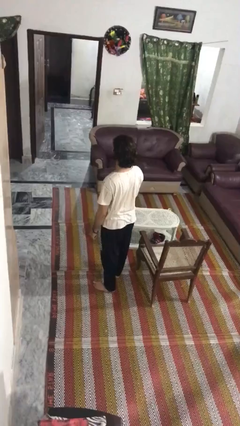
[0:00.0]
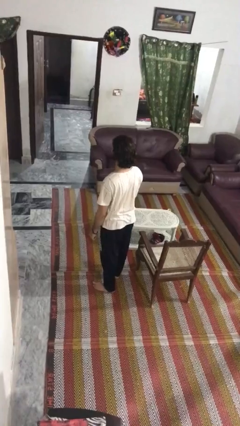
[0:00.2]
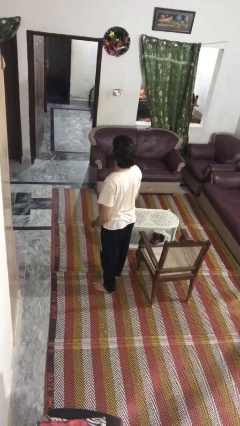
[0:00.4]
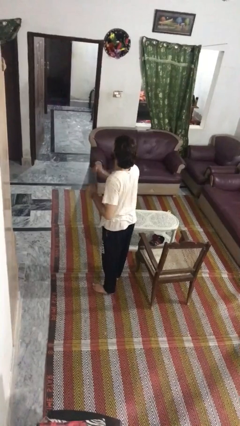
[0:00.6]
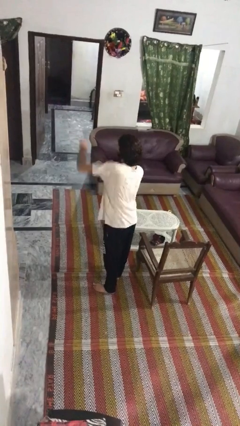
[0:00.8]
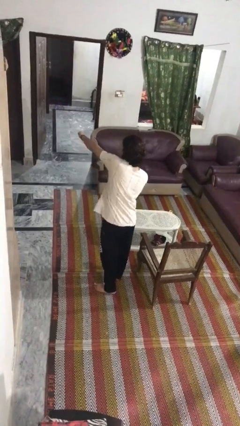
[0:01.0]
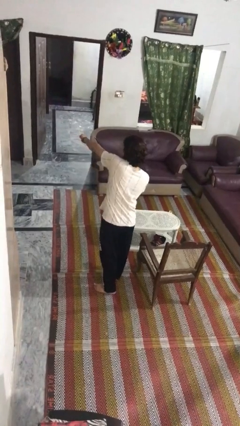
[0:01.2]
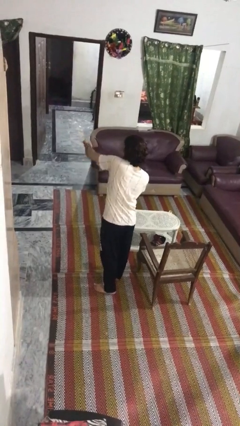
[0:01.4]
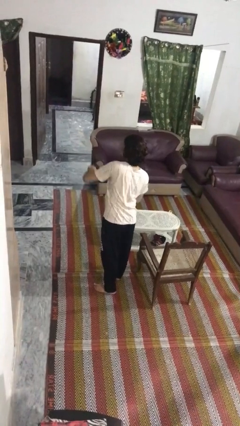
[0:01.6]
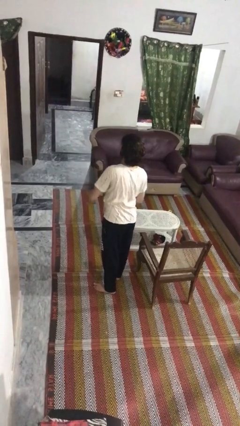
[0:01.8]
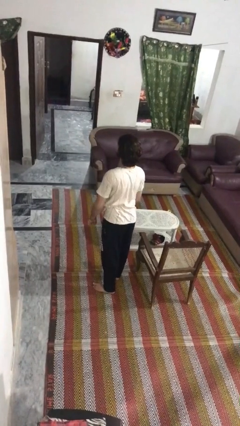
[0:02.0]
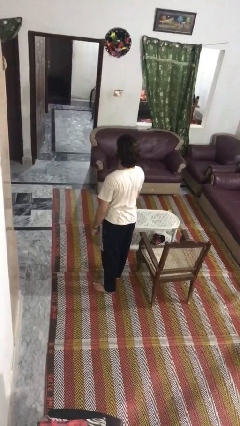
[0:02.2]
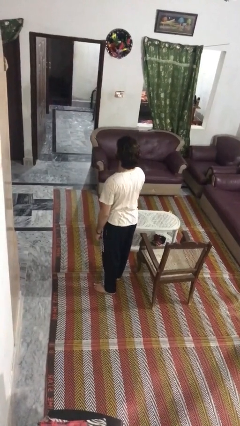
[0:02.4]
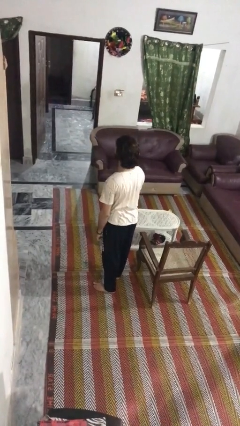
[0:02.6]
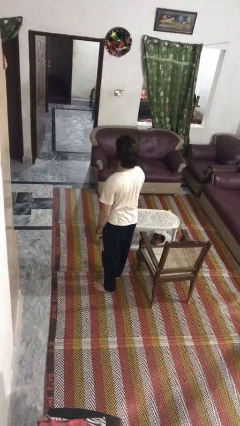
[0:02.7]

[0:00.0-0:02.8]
person punches

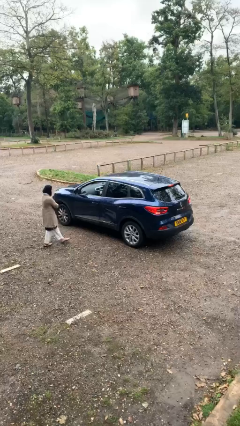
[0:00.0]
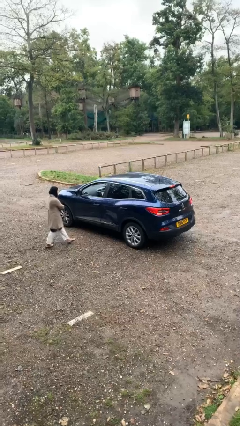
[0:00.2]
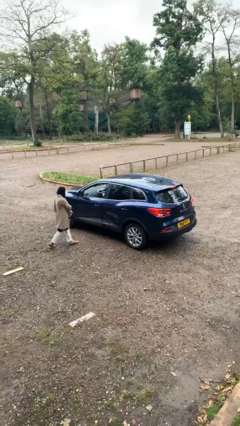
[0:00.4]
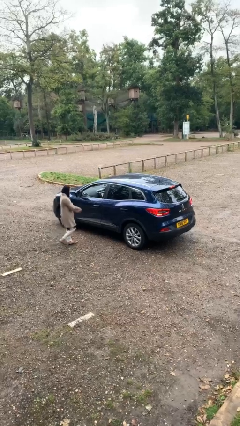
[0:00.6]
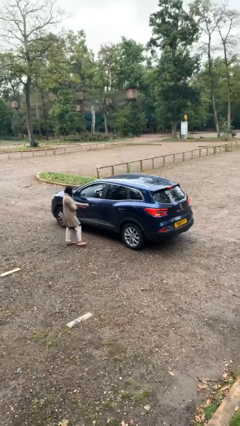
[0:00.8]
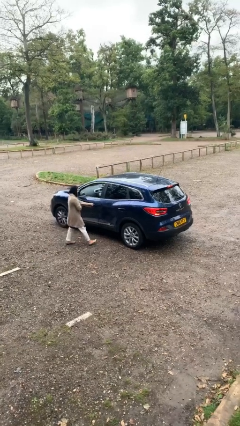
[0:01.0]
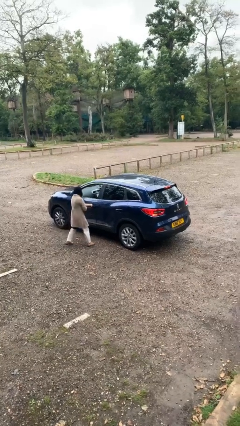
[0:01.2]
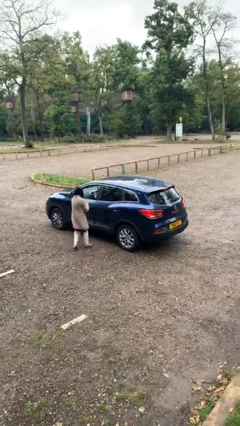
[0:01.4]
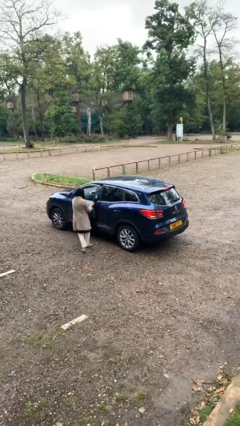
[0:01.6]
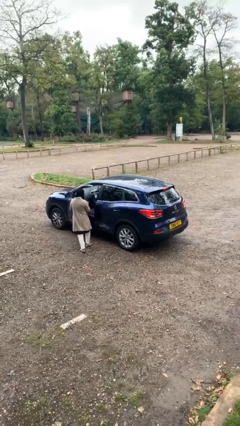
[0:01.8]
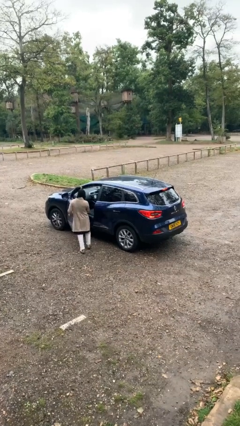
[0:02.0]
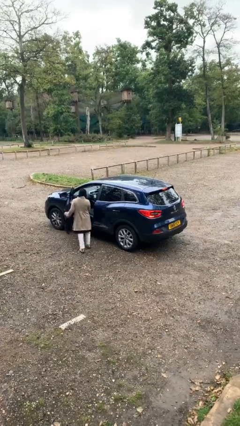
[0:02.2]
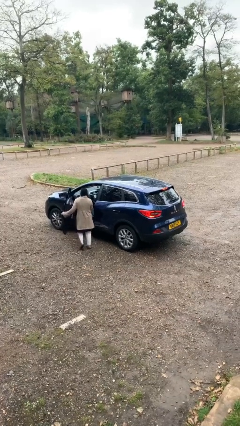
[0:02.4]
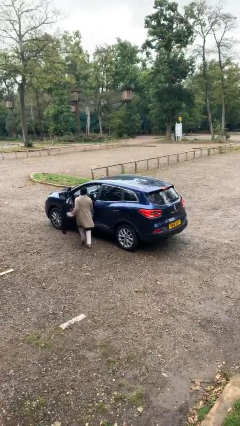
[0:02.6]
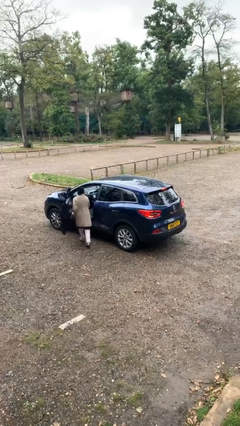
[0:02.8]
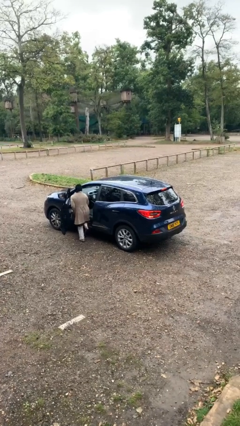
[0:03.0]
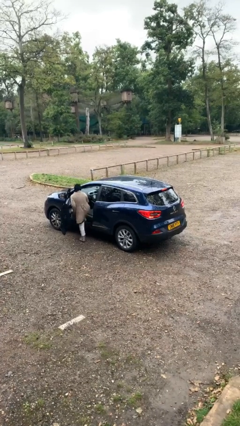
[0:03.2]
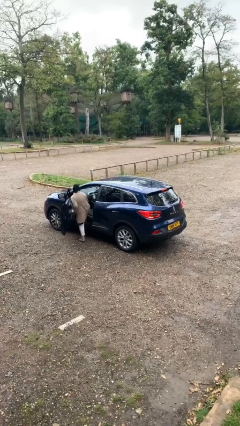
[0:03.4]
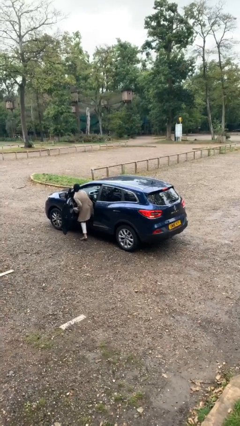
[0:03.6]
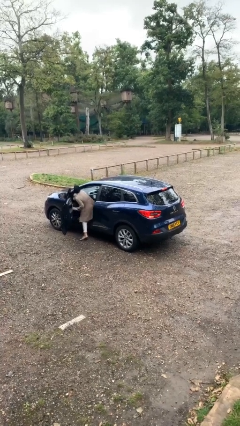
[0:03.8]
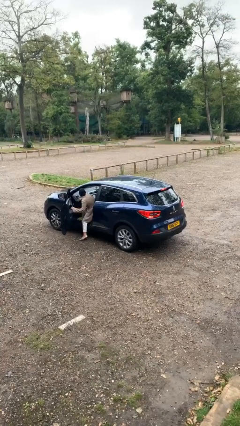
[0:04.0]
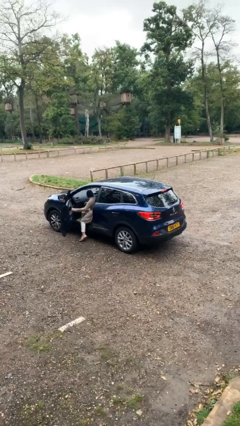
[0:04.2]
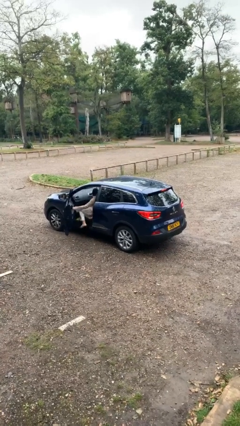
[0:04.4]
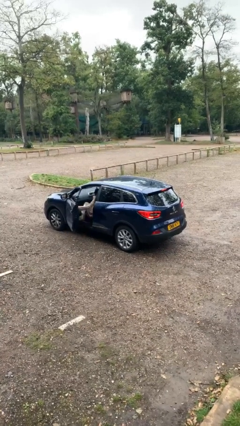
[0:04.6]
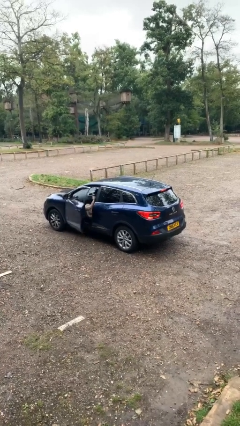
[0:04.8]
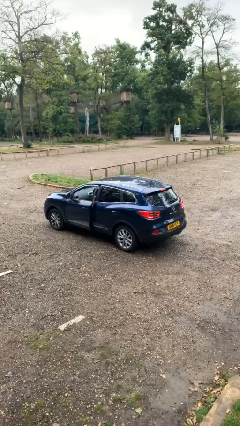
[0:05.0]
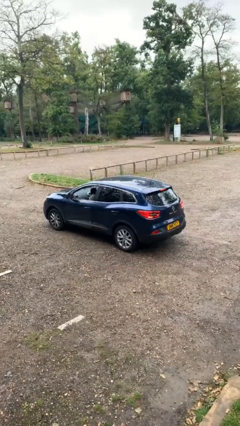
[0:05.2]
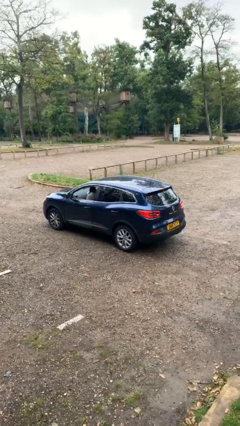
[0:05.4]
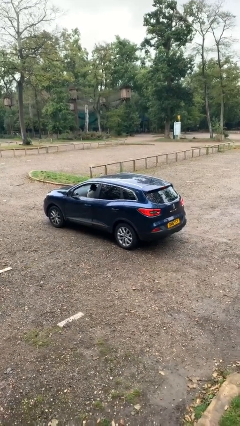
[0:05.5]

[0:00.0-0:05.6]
car picks up person

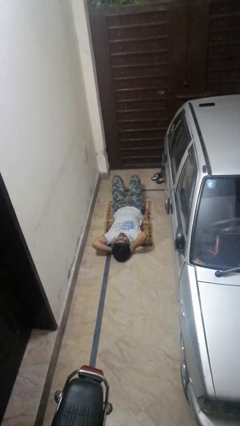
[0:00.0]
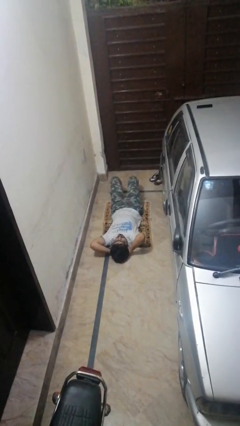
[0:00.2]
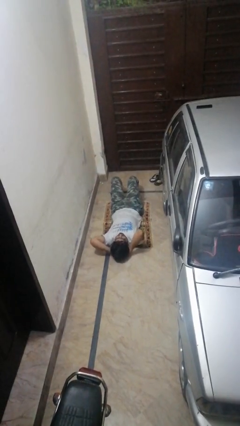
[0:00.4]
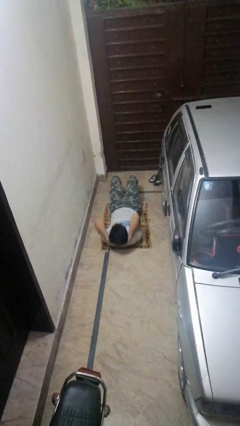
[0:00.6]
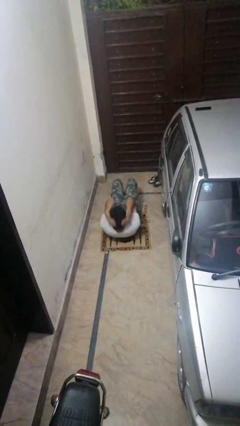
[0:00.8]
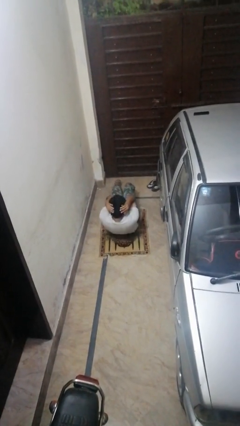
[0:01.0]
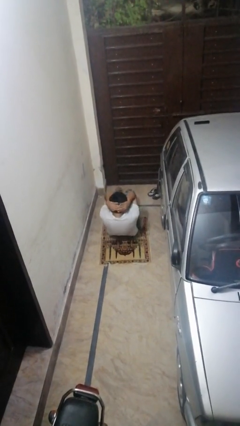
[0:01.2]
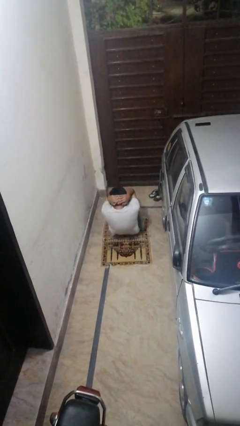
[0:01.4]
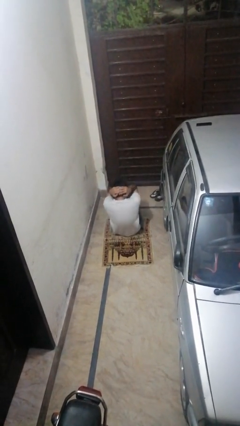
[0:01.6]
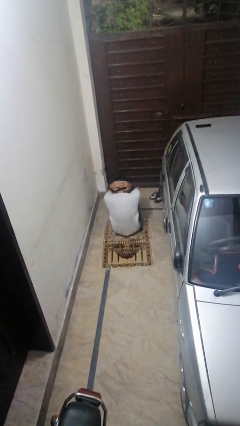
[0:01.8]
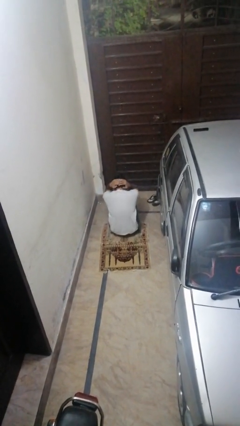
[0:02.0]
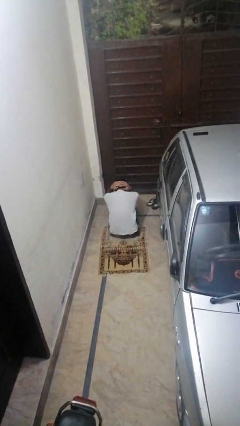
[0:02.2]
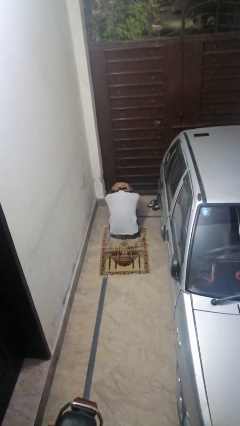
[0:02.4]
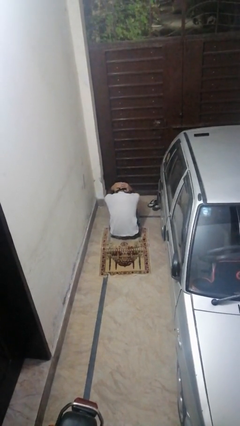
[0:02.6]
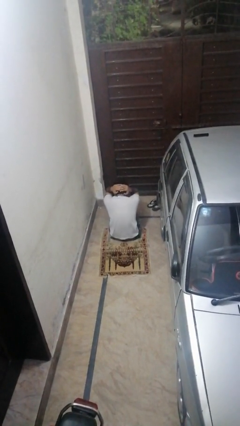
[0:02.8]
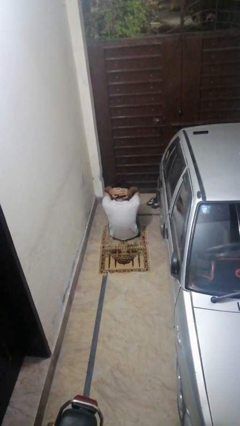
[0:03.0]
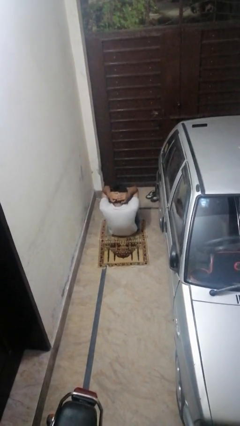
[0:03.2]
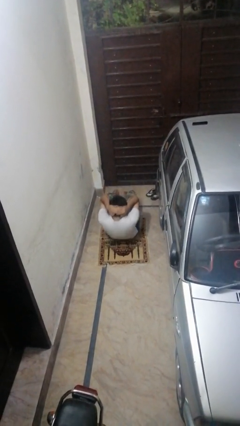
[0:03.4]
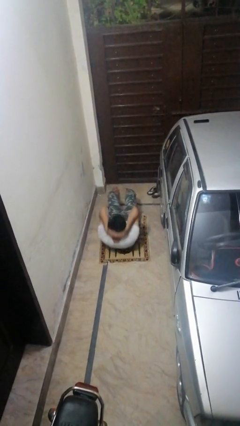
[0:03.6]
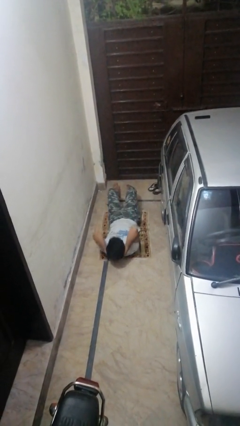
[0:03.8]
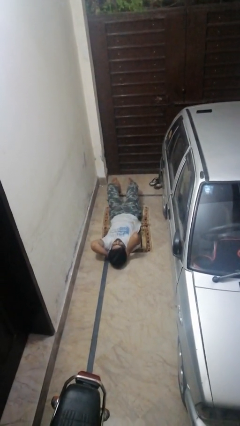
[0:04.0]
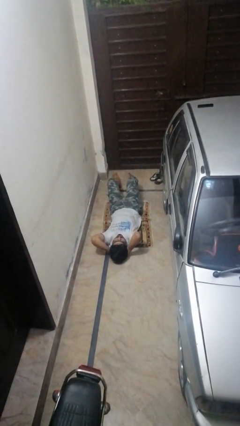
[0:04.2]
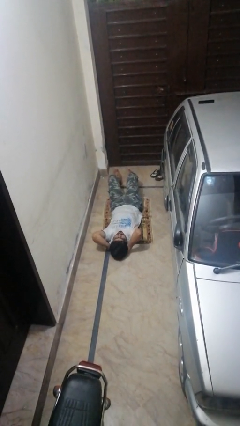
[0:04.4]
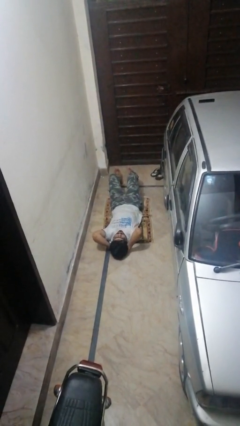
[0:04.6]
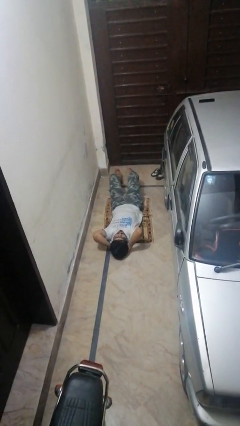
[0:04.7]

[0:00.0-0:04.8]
person exercises with situp

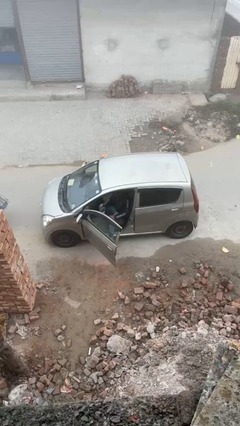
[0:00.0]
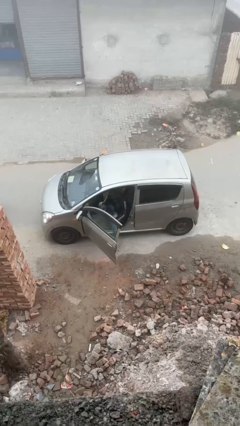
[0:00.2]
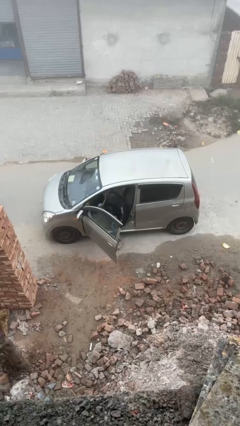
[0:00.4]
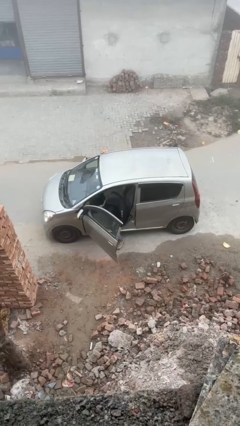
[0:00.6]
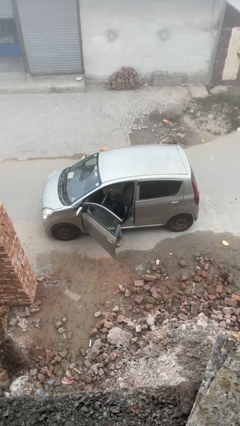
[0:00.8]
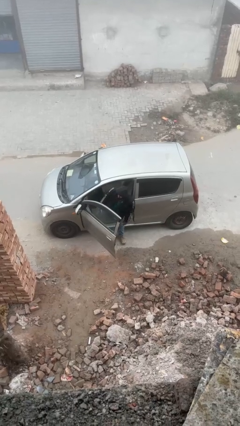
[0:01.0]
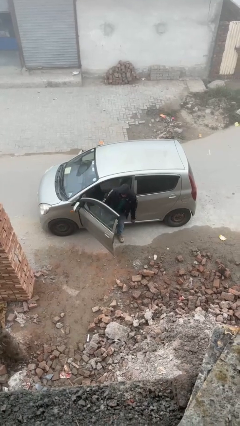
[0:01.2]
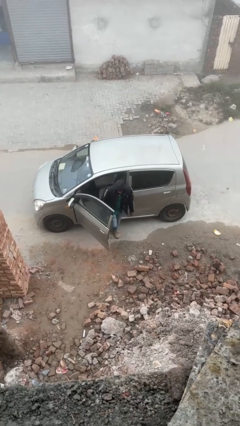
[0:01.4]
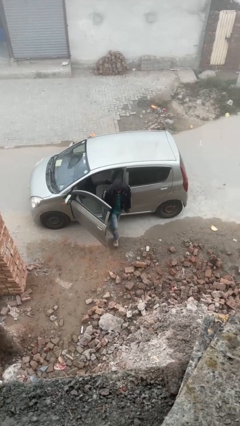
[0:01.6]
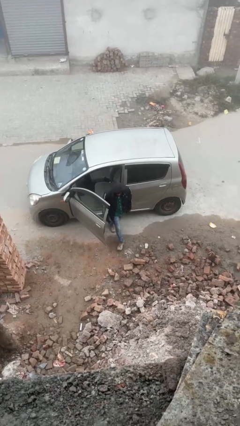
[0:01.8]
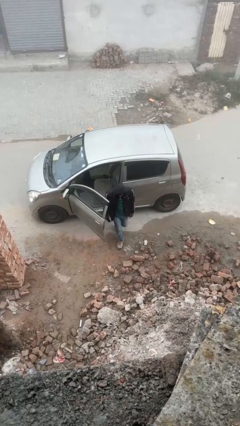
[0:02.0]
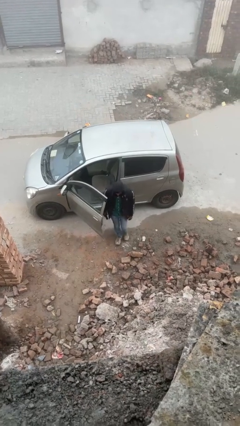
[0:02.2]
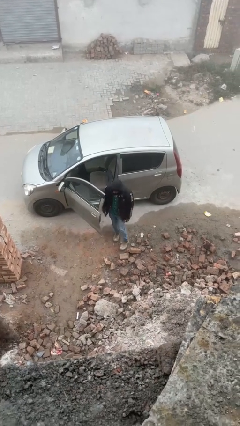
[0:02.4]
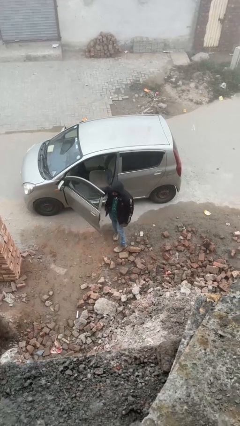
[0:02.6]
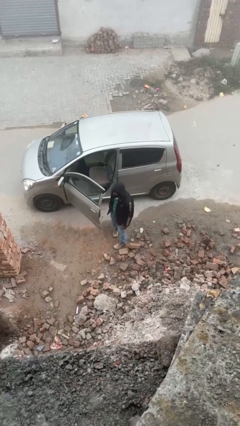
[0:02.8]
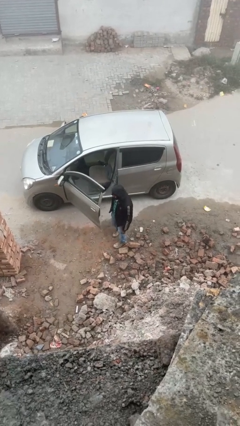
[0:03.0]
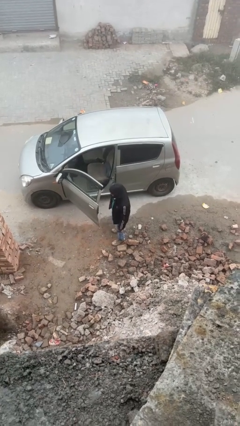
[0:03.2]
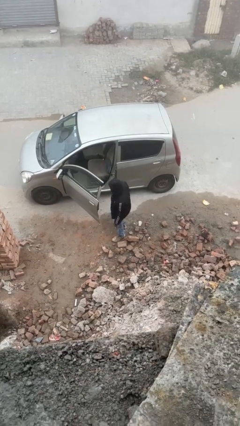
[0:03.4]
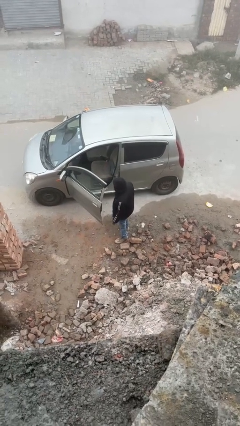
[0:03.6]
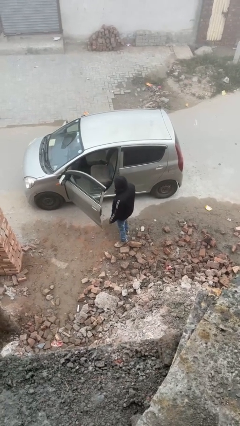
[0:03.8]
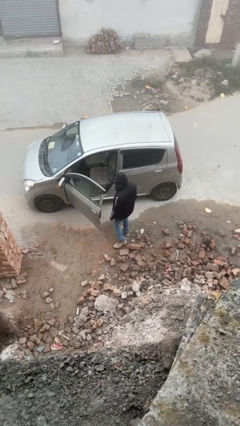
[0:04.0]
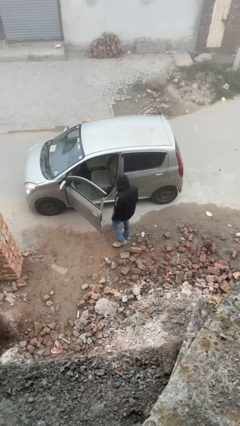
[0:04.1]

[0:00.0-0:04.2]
person exits car

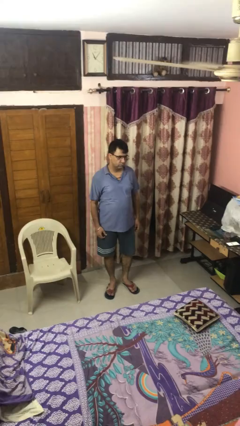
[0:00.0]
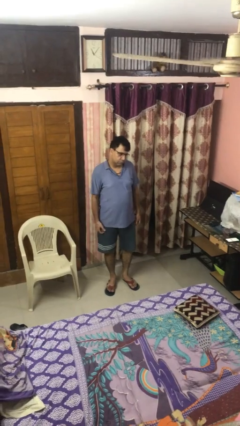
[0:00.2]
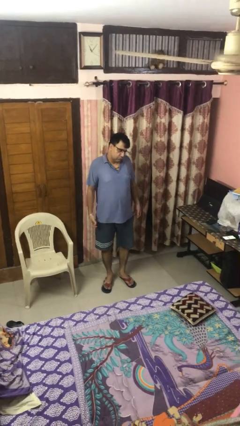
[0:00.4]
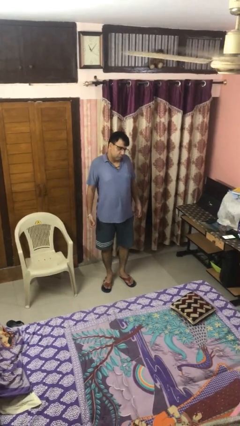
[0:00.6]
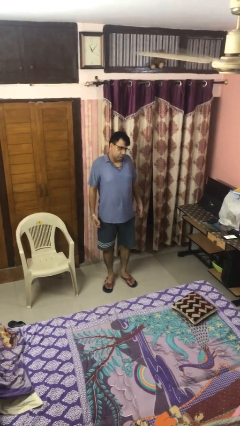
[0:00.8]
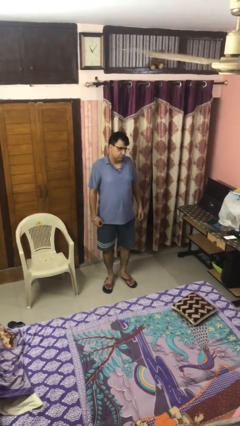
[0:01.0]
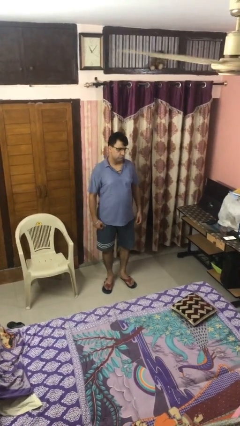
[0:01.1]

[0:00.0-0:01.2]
person shrugs
